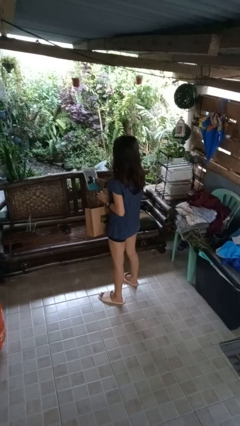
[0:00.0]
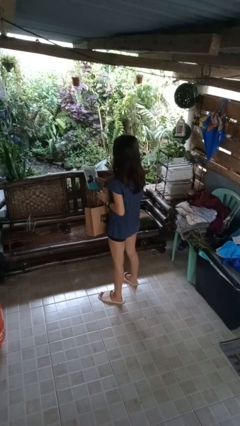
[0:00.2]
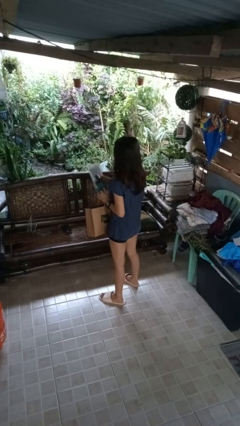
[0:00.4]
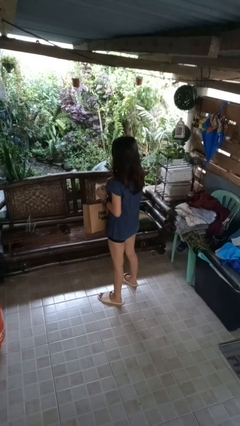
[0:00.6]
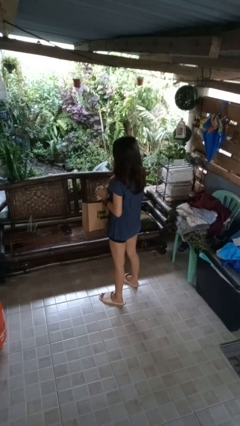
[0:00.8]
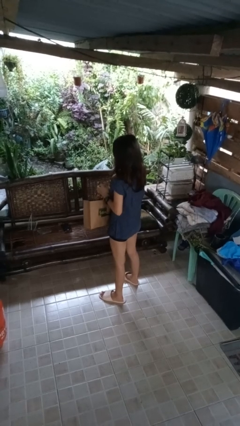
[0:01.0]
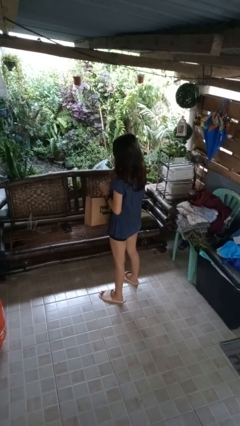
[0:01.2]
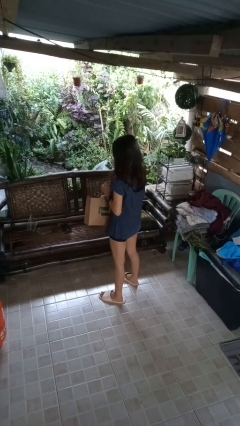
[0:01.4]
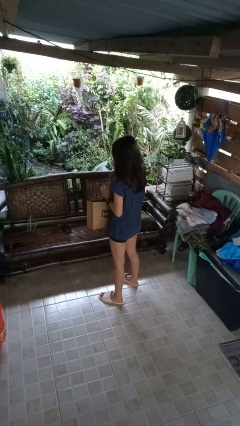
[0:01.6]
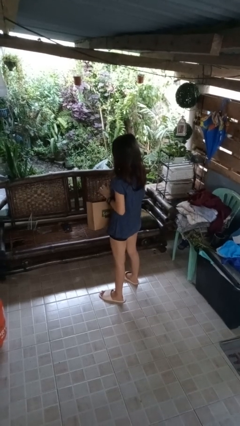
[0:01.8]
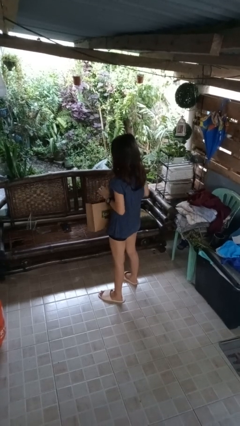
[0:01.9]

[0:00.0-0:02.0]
person puts object into bag

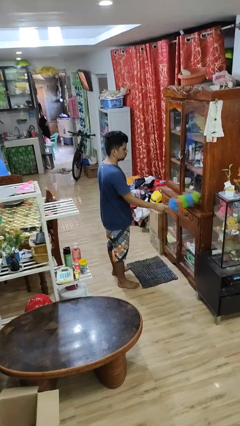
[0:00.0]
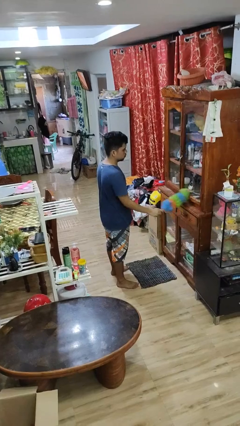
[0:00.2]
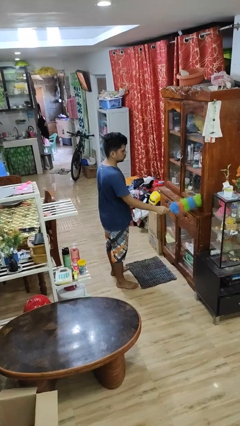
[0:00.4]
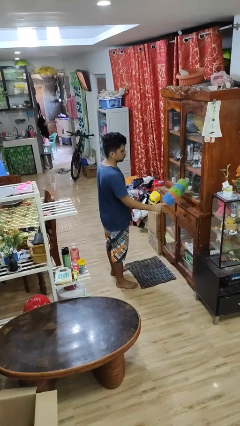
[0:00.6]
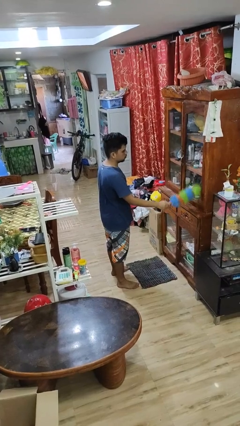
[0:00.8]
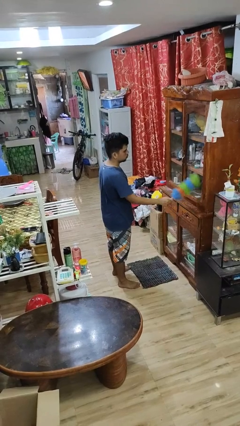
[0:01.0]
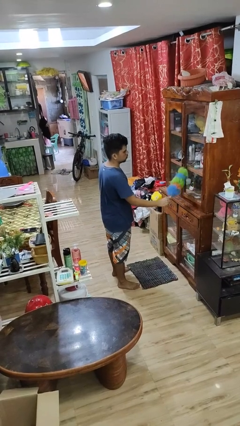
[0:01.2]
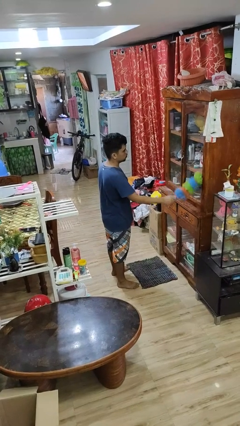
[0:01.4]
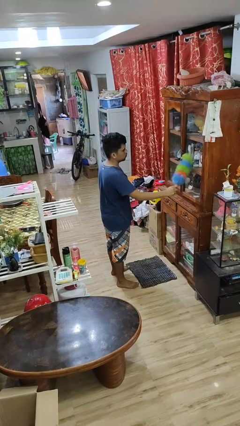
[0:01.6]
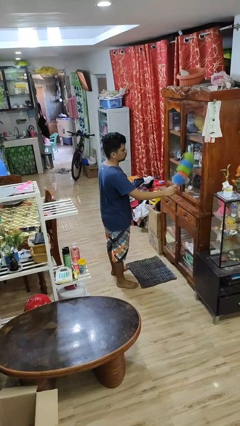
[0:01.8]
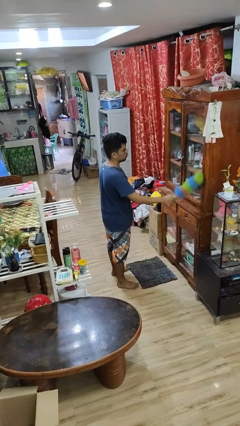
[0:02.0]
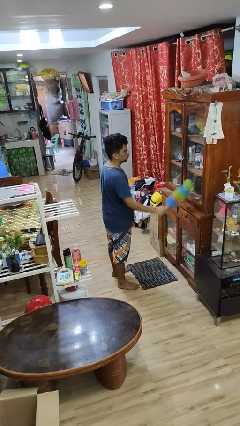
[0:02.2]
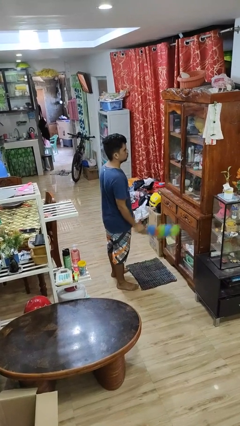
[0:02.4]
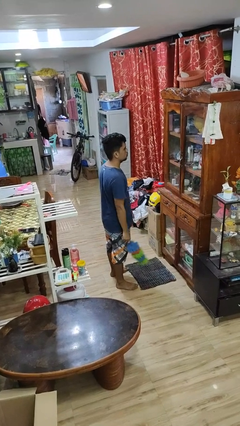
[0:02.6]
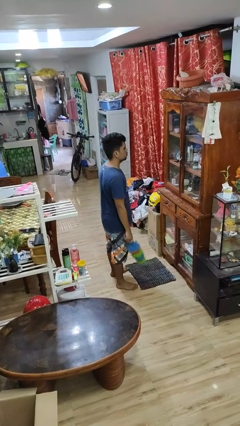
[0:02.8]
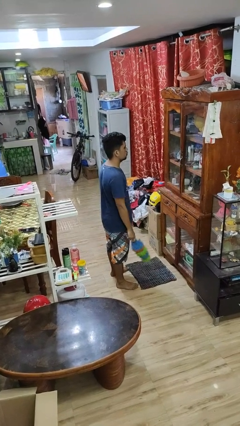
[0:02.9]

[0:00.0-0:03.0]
person dusts furniture

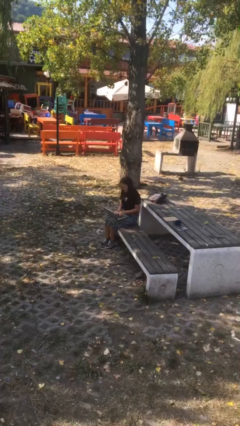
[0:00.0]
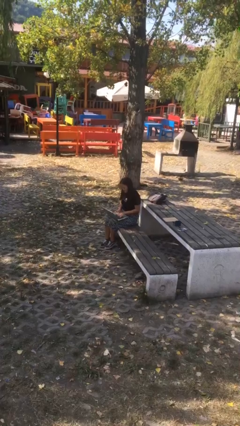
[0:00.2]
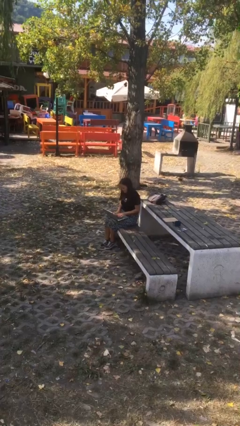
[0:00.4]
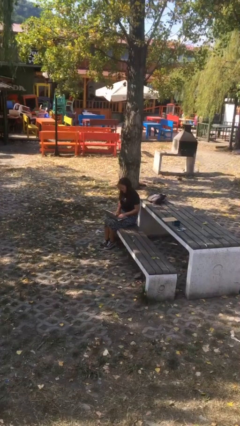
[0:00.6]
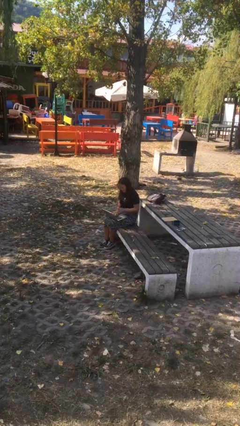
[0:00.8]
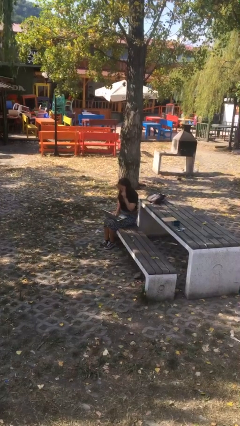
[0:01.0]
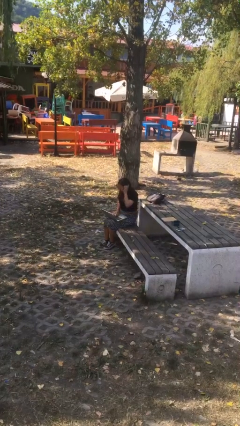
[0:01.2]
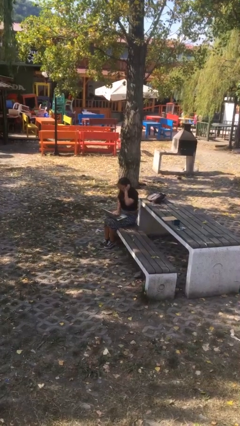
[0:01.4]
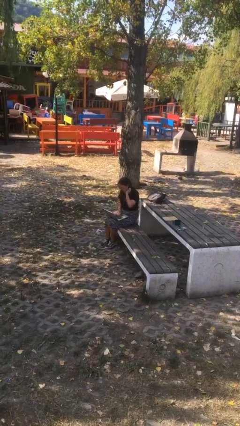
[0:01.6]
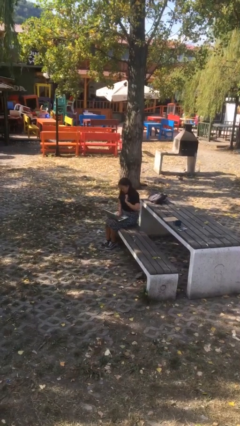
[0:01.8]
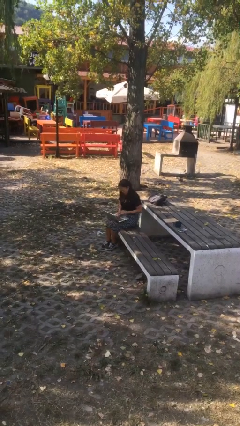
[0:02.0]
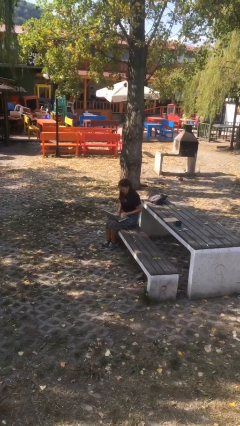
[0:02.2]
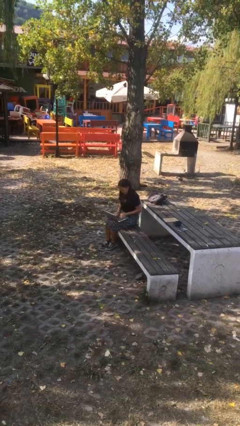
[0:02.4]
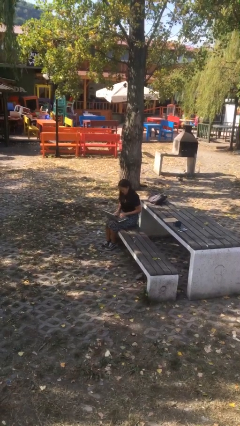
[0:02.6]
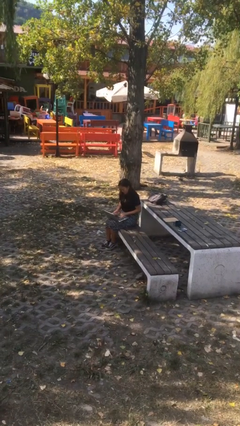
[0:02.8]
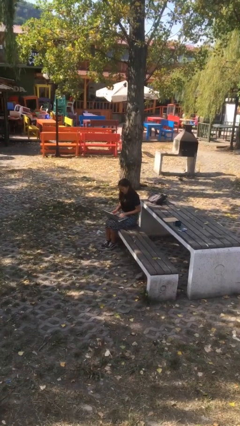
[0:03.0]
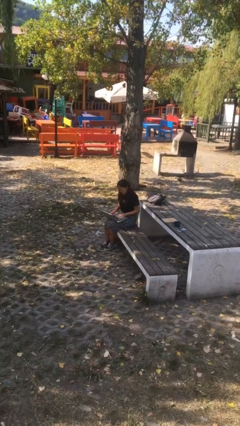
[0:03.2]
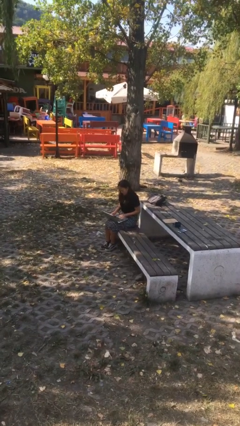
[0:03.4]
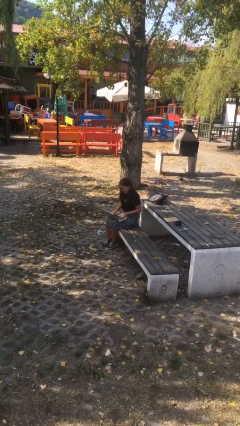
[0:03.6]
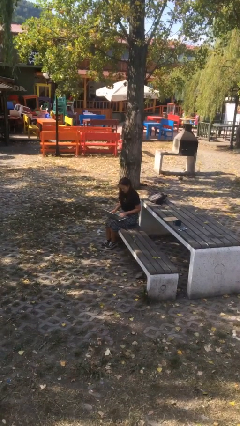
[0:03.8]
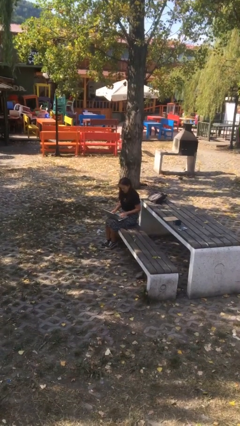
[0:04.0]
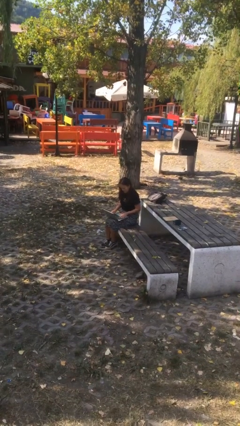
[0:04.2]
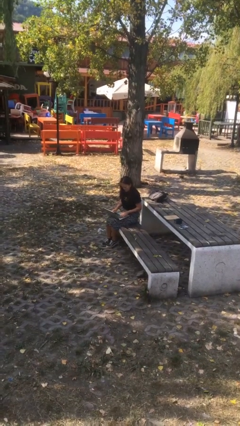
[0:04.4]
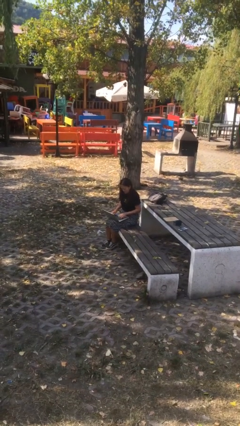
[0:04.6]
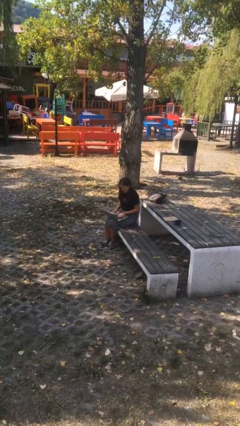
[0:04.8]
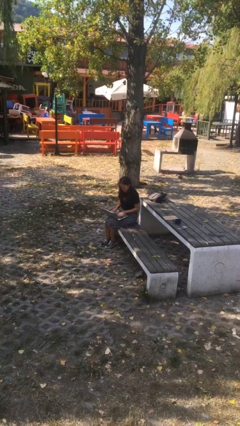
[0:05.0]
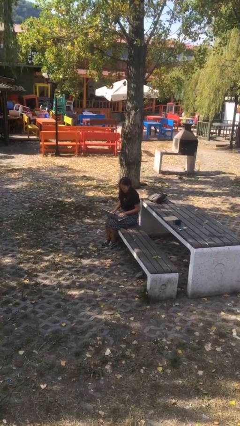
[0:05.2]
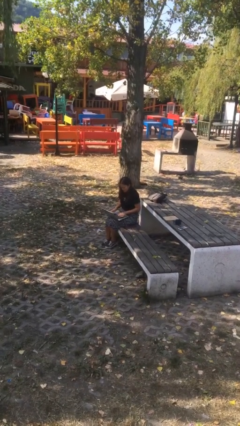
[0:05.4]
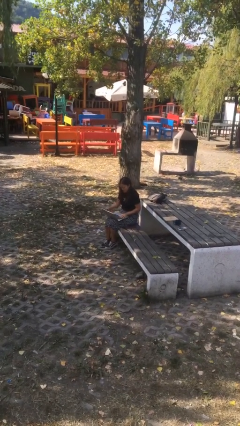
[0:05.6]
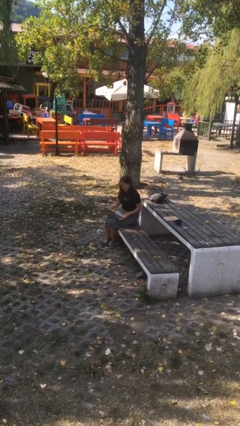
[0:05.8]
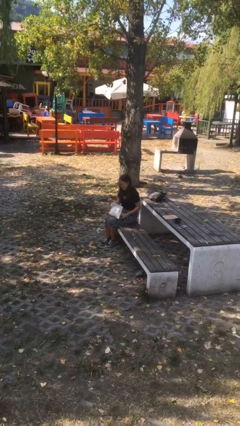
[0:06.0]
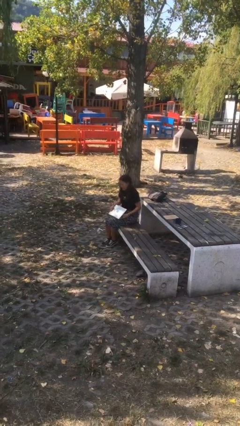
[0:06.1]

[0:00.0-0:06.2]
person interacts with laptop

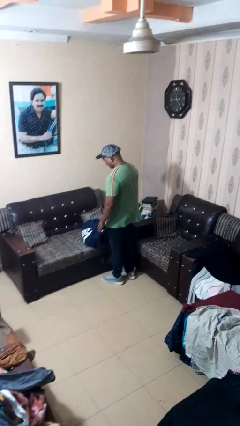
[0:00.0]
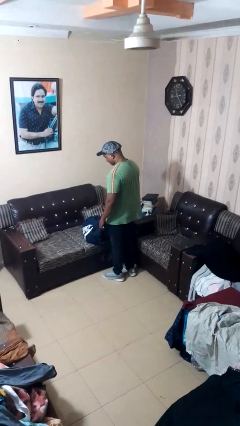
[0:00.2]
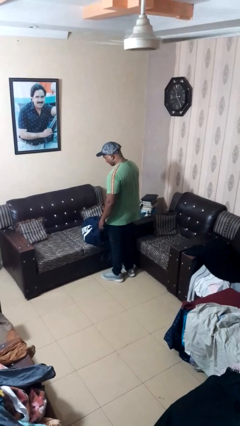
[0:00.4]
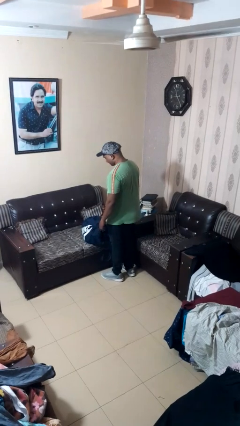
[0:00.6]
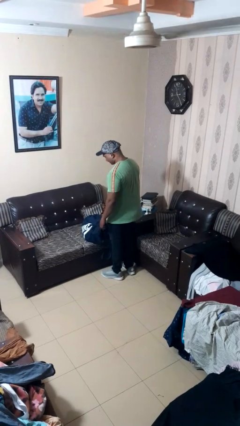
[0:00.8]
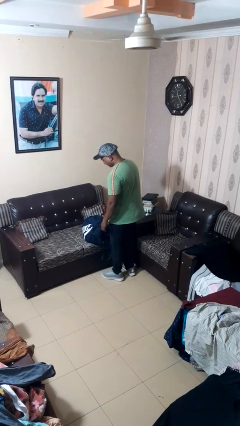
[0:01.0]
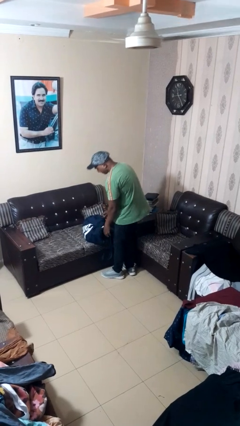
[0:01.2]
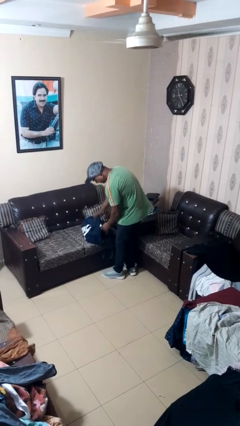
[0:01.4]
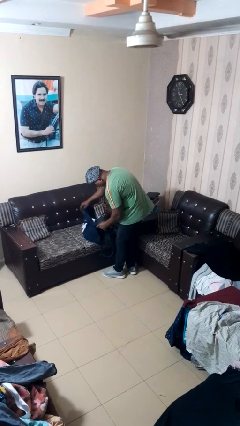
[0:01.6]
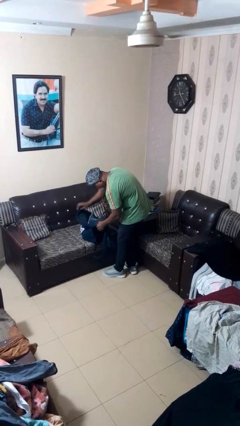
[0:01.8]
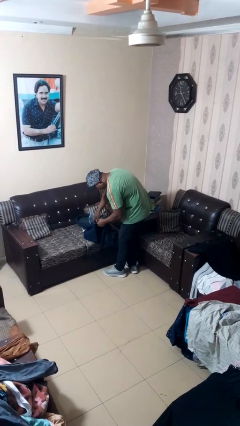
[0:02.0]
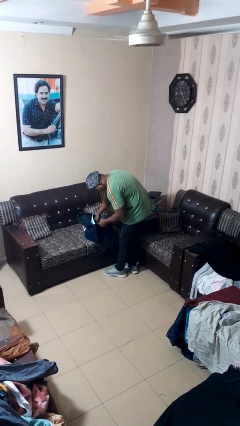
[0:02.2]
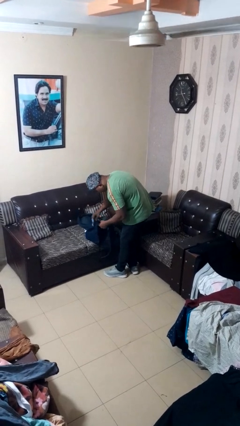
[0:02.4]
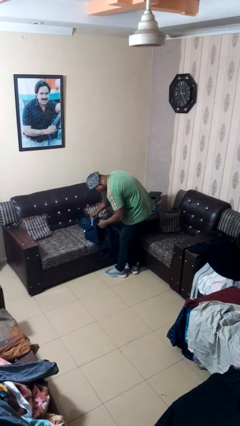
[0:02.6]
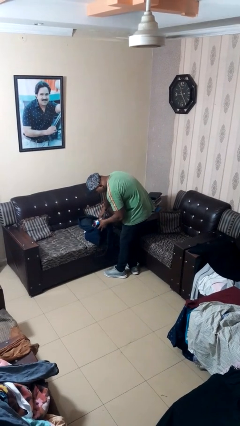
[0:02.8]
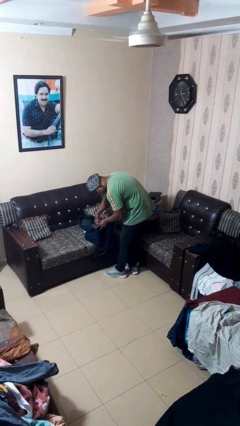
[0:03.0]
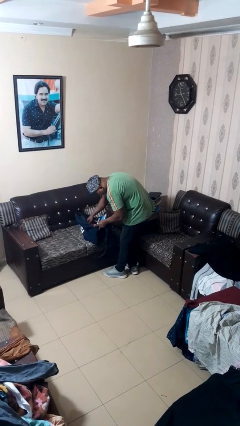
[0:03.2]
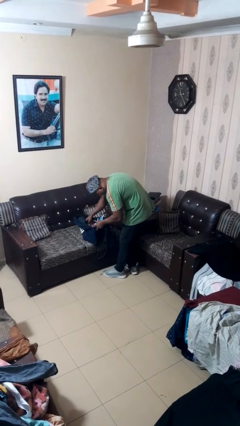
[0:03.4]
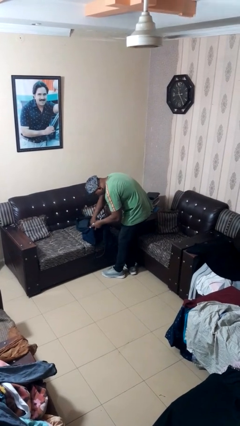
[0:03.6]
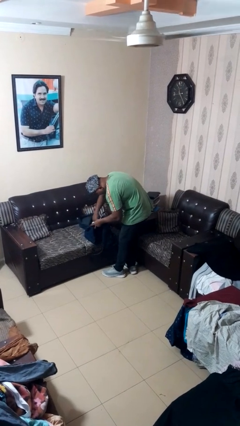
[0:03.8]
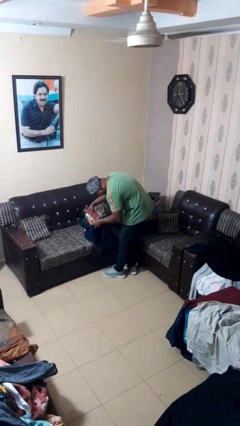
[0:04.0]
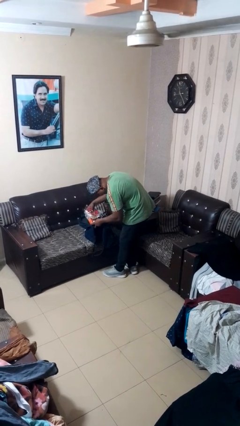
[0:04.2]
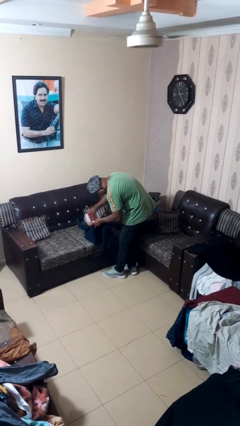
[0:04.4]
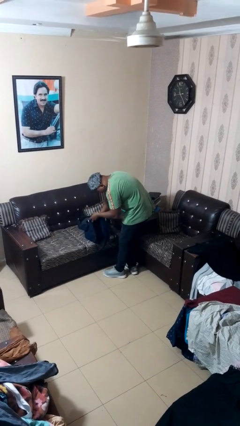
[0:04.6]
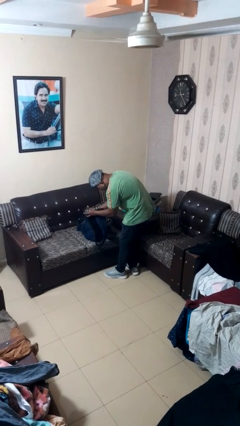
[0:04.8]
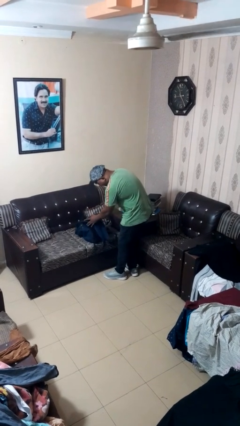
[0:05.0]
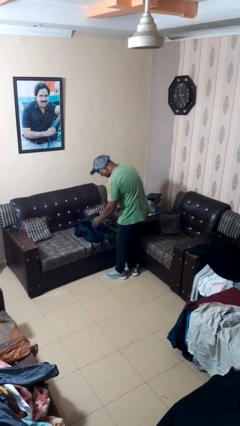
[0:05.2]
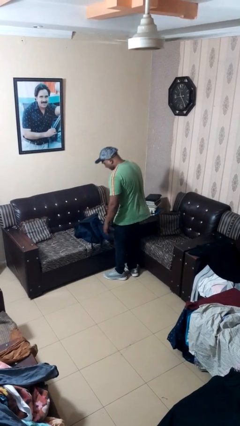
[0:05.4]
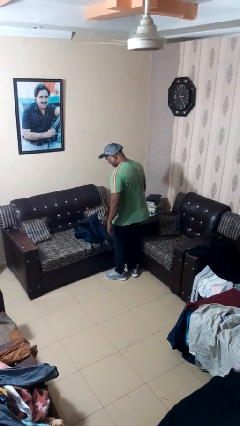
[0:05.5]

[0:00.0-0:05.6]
person searches in bag

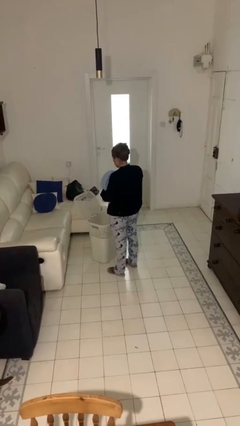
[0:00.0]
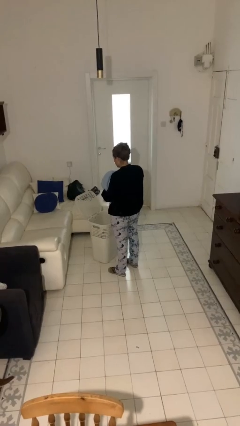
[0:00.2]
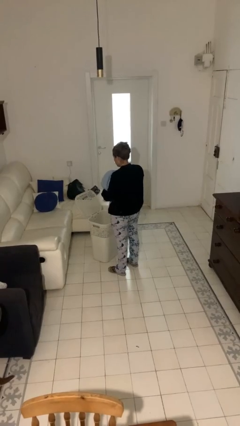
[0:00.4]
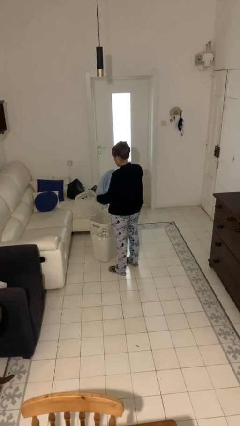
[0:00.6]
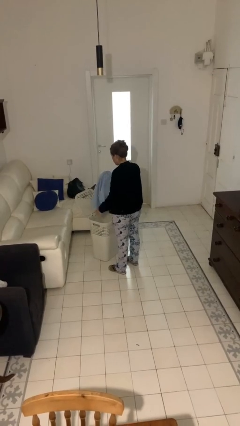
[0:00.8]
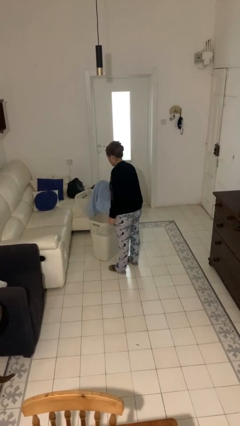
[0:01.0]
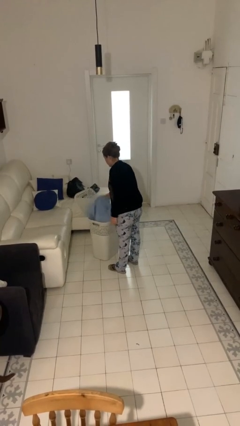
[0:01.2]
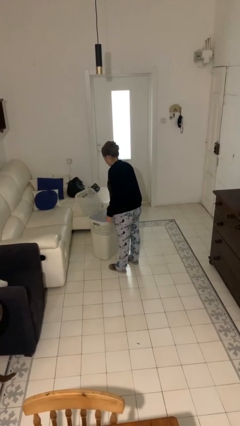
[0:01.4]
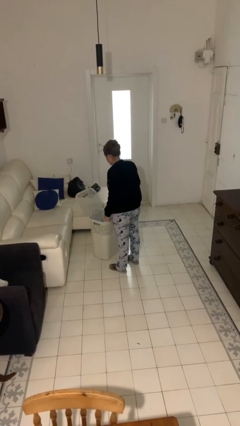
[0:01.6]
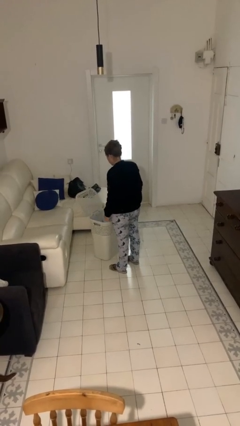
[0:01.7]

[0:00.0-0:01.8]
person puts object into basket
